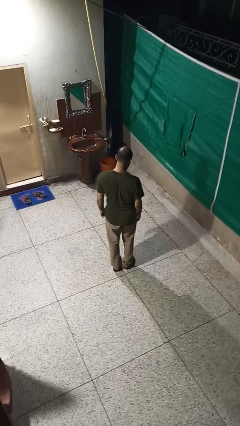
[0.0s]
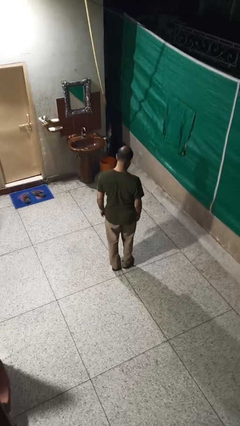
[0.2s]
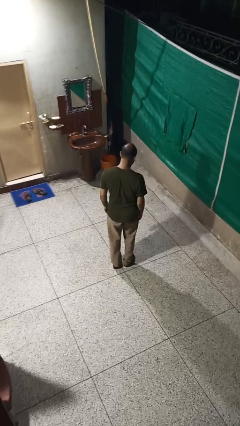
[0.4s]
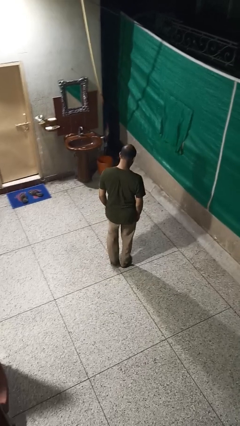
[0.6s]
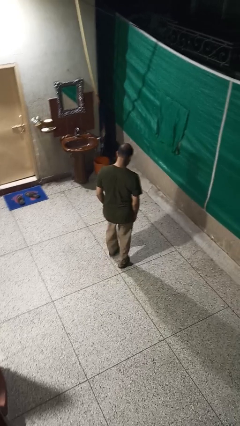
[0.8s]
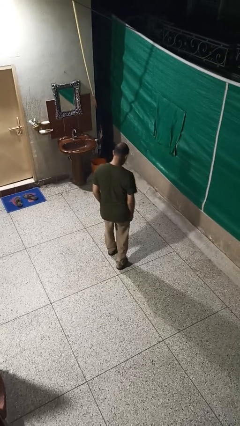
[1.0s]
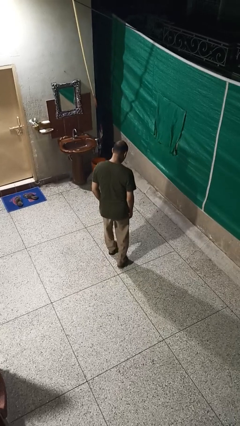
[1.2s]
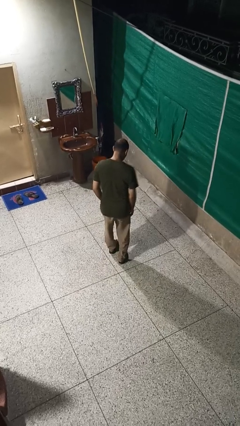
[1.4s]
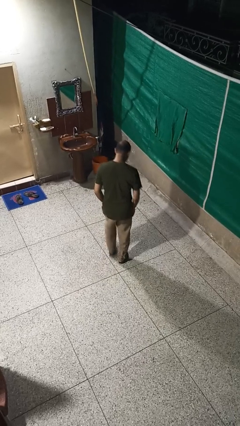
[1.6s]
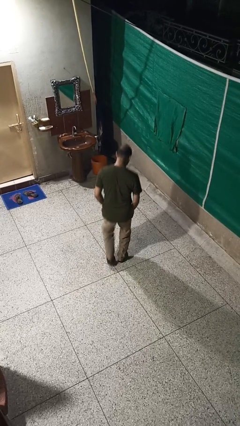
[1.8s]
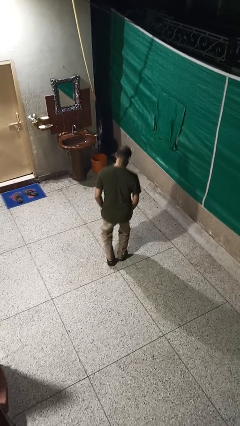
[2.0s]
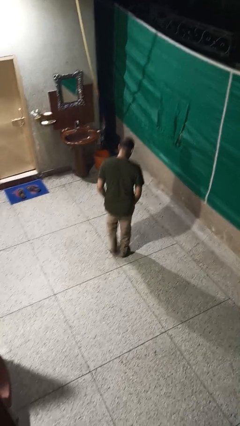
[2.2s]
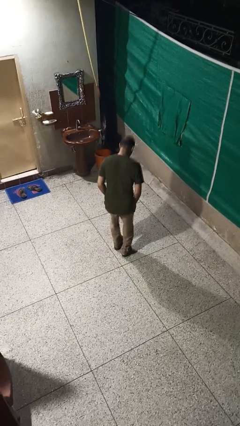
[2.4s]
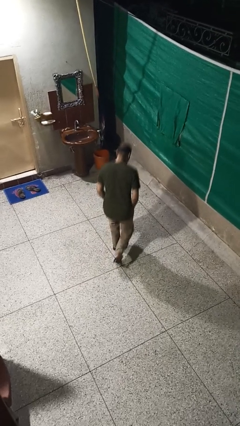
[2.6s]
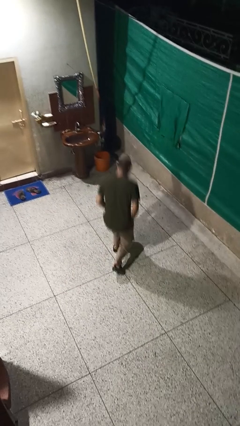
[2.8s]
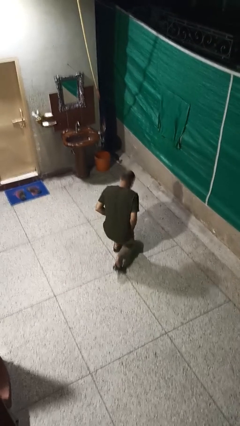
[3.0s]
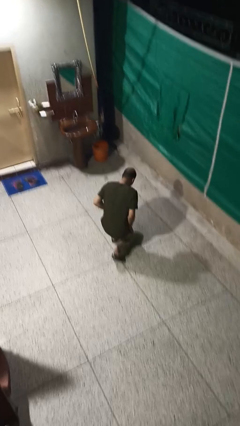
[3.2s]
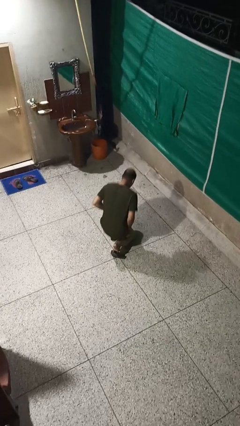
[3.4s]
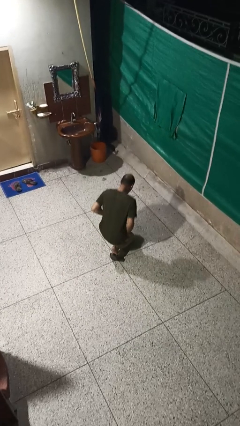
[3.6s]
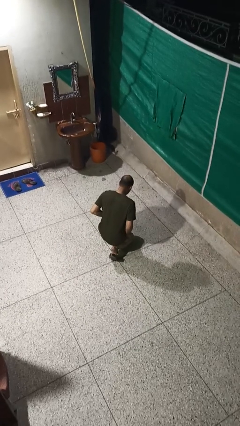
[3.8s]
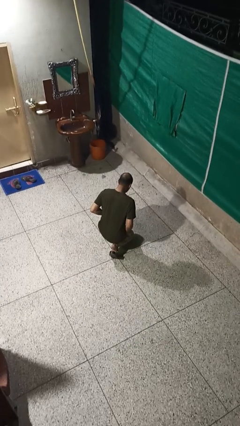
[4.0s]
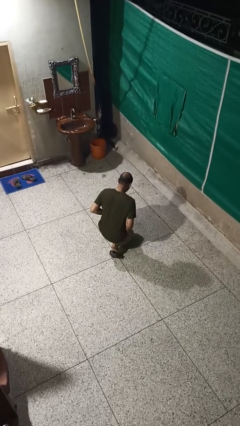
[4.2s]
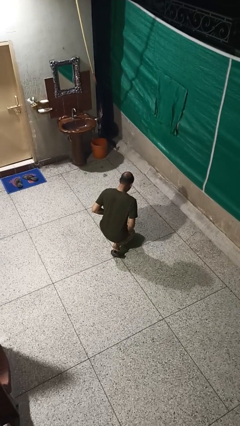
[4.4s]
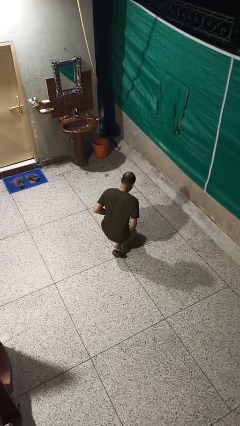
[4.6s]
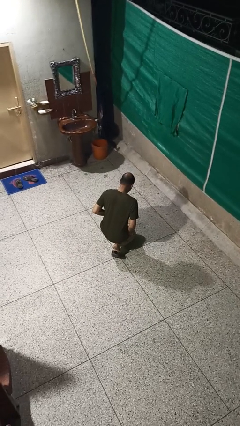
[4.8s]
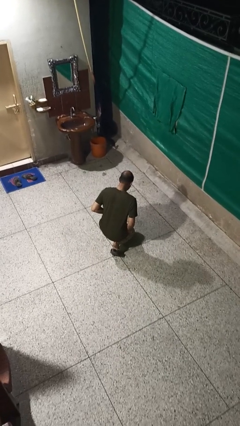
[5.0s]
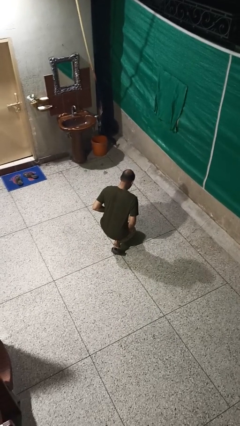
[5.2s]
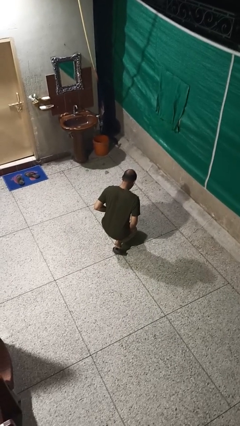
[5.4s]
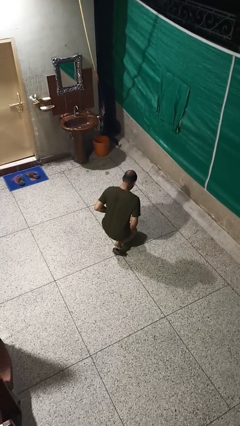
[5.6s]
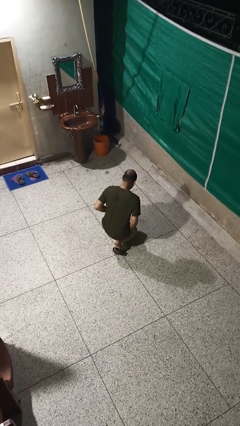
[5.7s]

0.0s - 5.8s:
person kneels

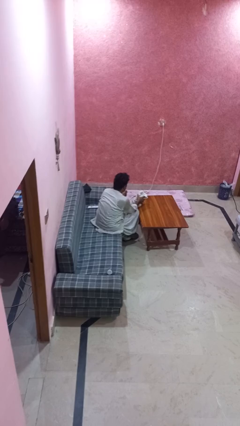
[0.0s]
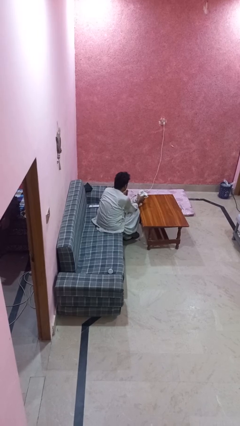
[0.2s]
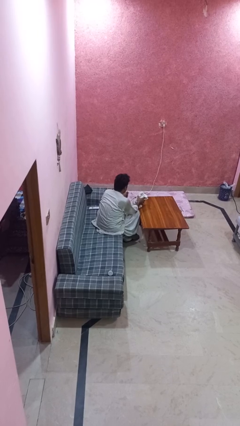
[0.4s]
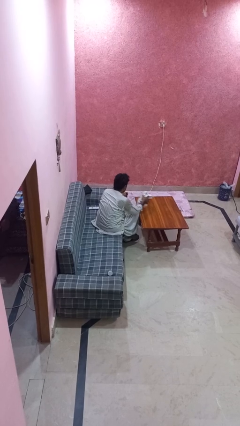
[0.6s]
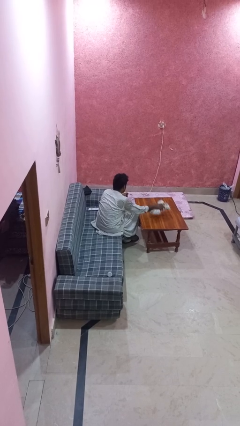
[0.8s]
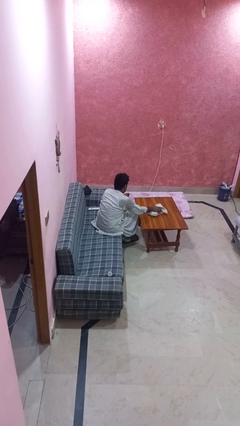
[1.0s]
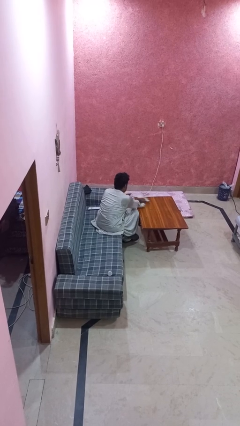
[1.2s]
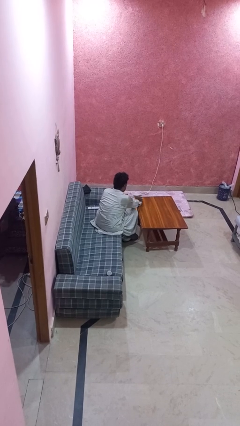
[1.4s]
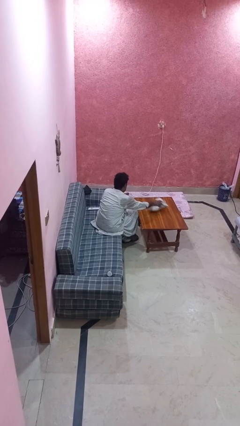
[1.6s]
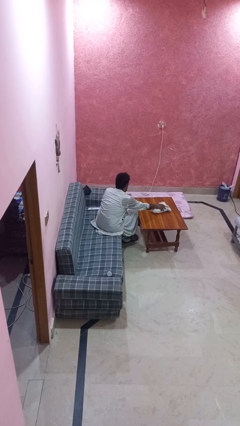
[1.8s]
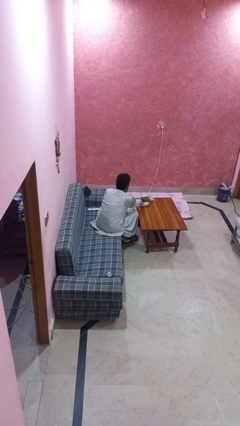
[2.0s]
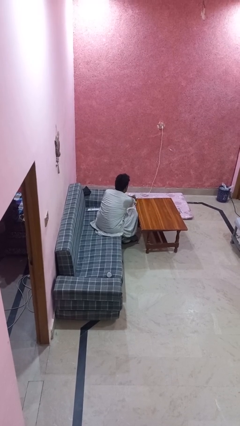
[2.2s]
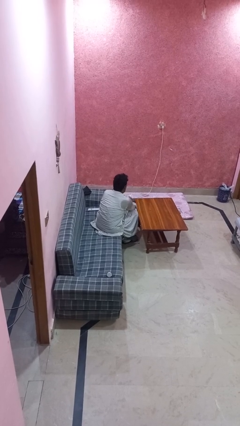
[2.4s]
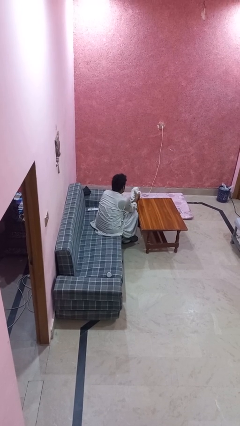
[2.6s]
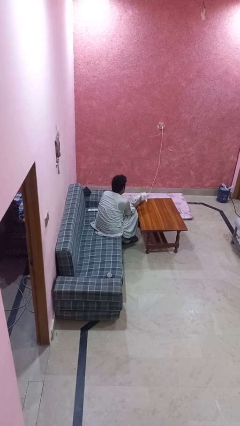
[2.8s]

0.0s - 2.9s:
person cleans table with rag

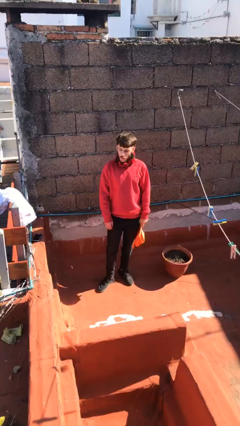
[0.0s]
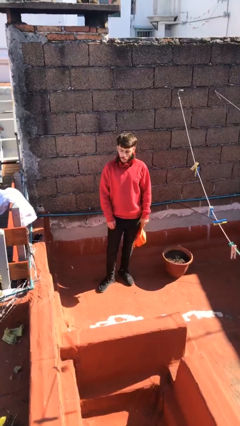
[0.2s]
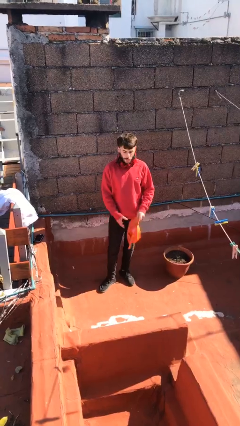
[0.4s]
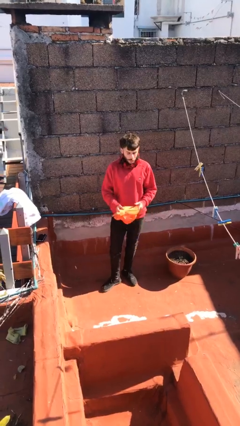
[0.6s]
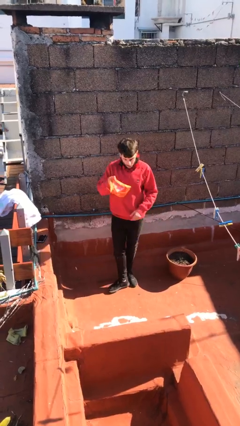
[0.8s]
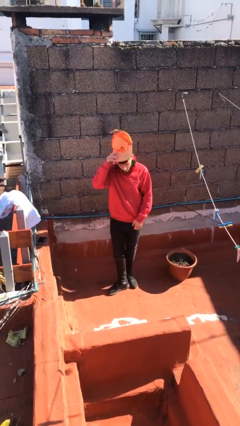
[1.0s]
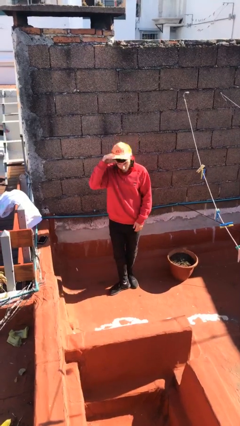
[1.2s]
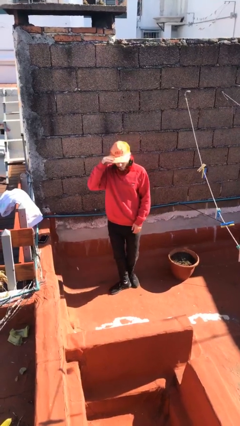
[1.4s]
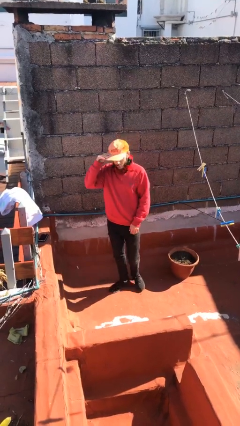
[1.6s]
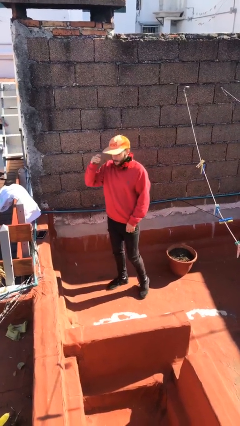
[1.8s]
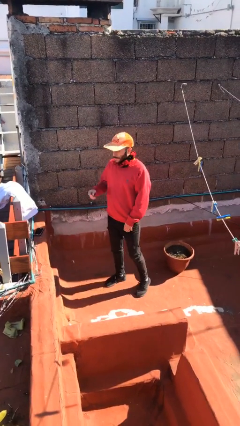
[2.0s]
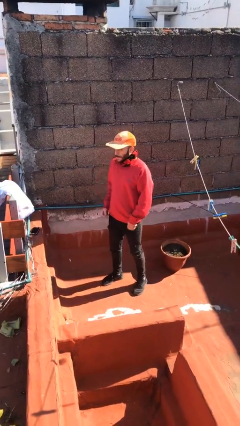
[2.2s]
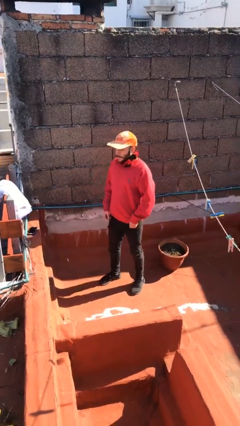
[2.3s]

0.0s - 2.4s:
person puts on hat

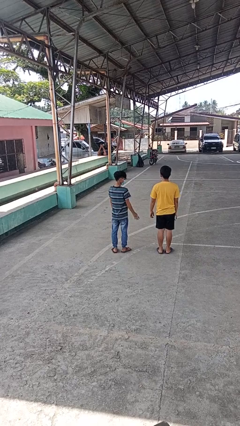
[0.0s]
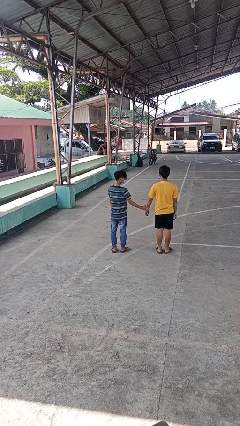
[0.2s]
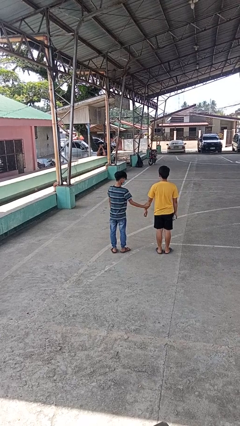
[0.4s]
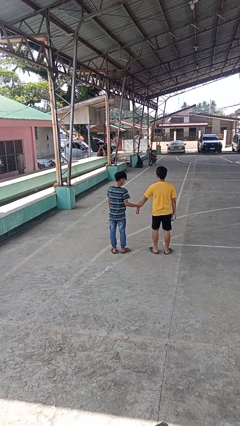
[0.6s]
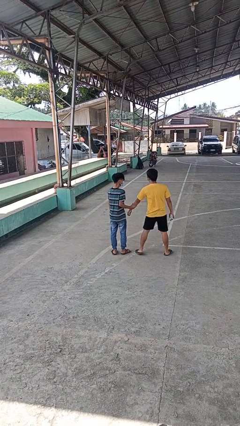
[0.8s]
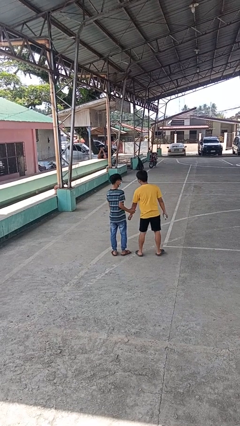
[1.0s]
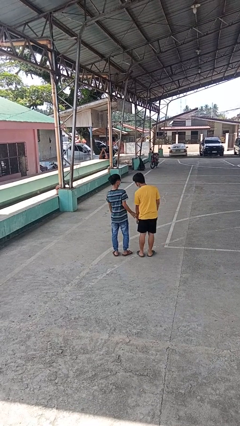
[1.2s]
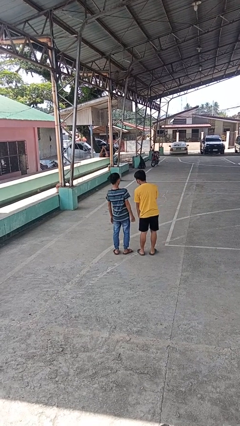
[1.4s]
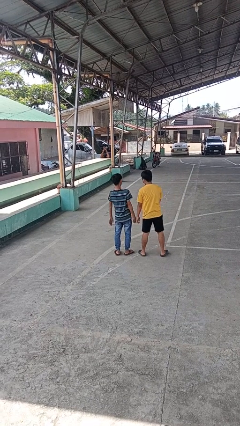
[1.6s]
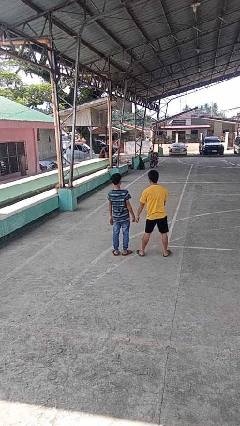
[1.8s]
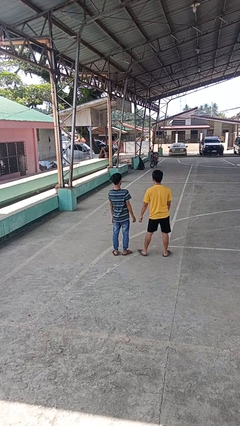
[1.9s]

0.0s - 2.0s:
person grabs person by forearm

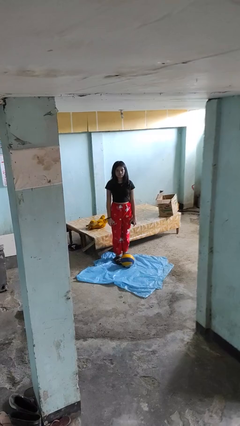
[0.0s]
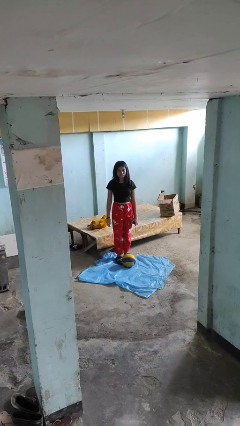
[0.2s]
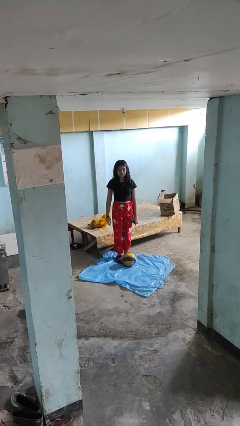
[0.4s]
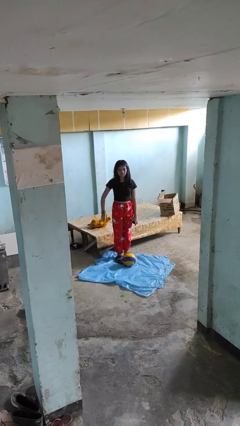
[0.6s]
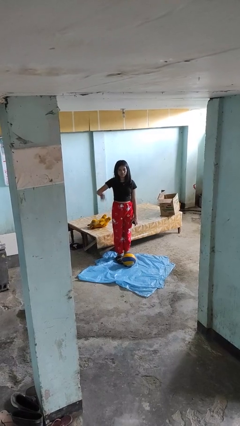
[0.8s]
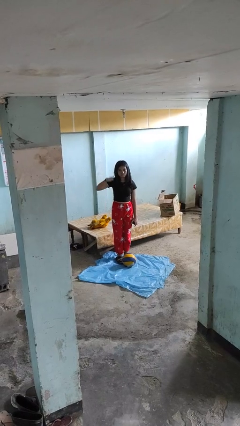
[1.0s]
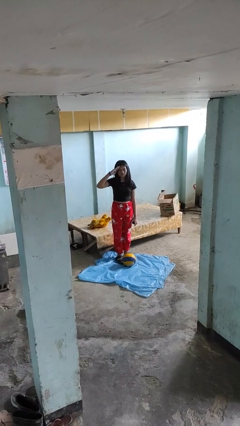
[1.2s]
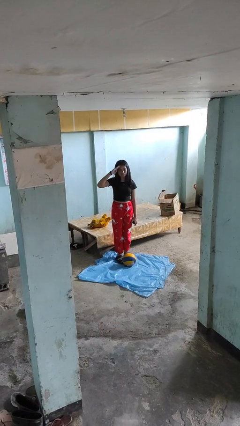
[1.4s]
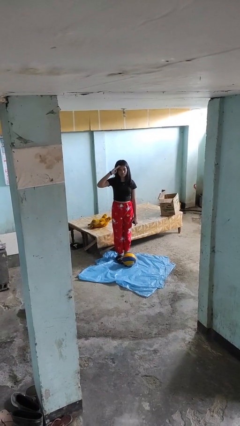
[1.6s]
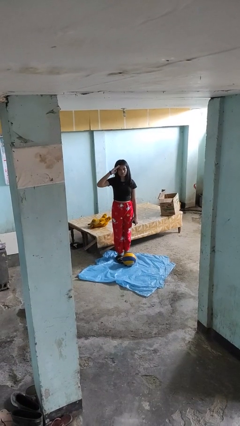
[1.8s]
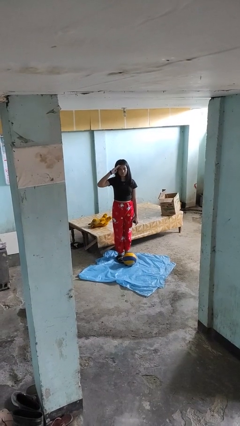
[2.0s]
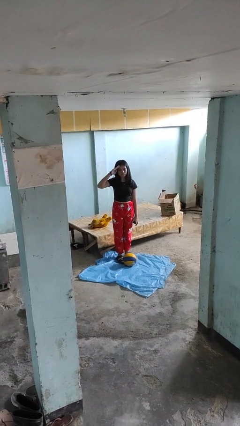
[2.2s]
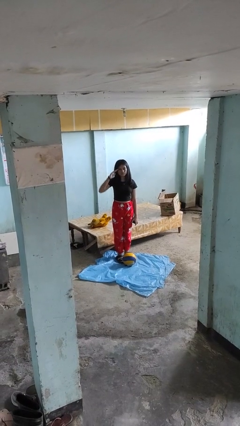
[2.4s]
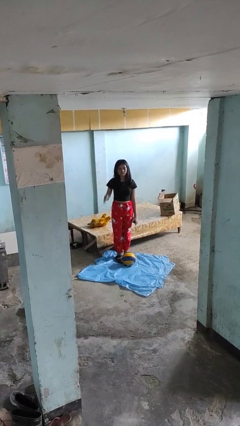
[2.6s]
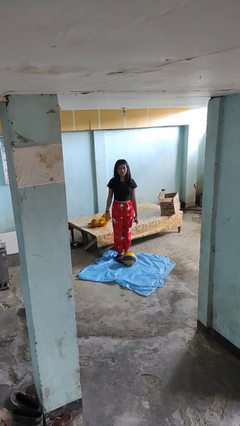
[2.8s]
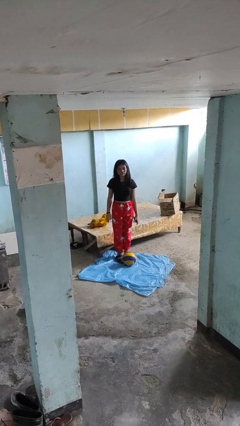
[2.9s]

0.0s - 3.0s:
person salutes

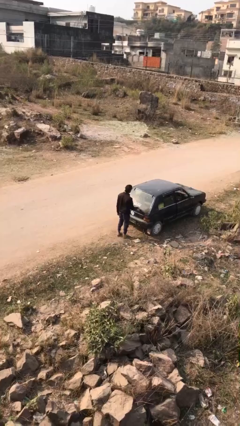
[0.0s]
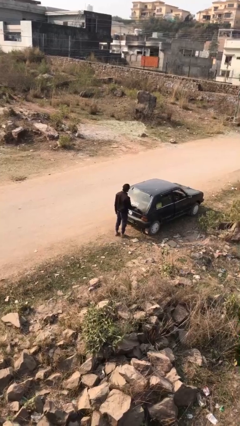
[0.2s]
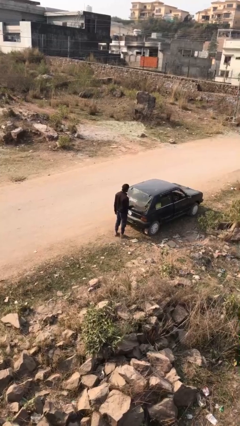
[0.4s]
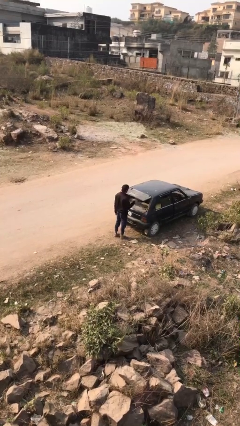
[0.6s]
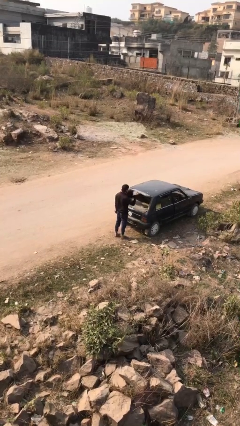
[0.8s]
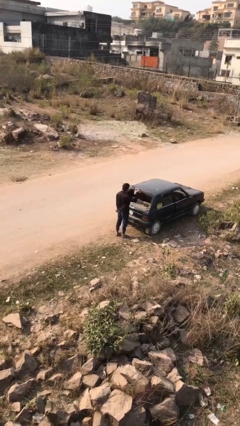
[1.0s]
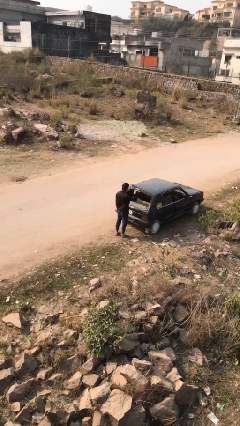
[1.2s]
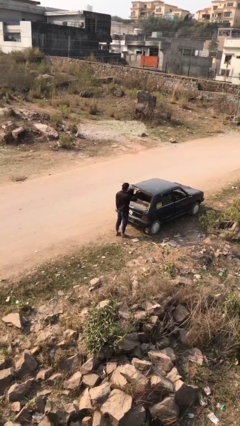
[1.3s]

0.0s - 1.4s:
person opens car trunk

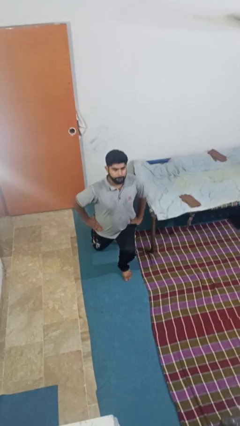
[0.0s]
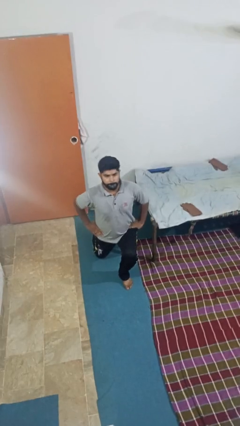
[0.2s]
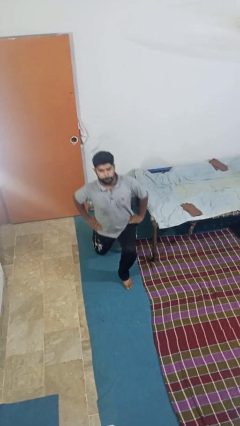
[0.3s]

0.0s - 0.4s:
person exercises with lunges
